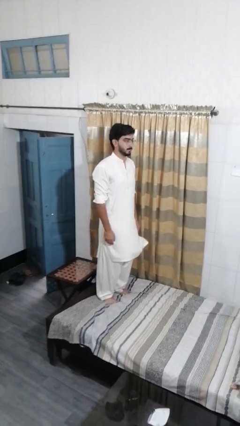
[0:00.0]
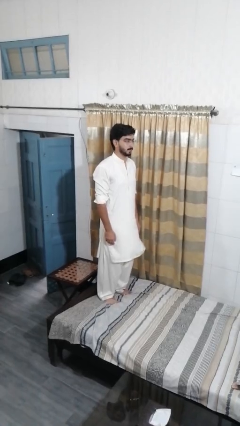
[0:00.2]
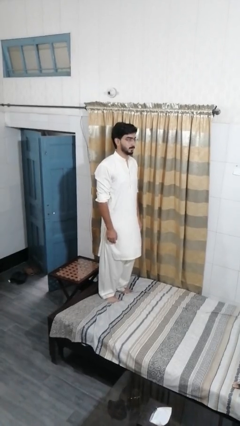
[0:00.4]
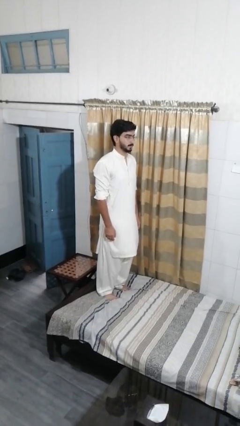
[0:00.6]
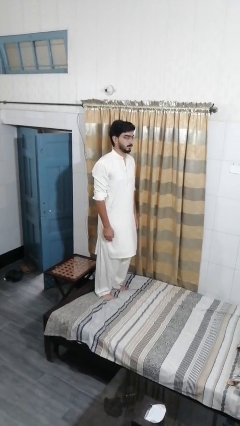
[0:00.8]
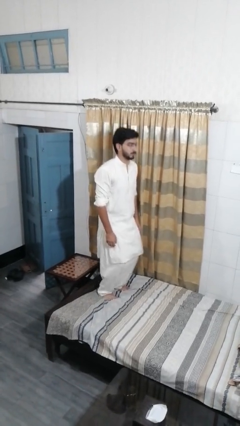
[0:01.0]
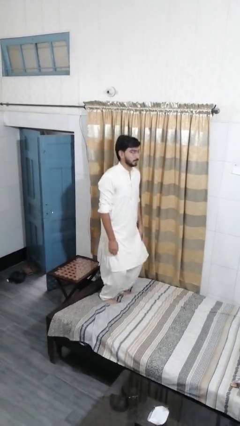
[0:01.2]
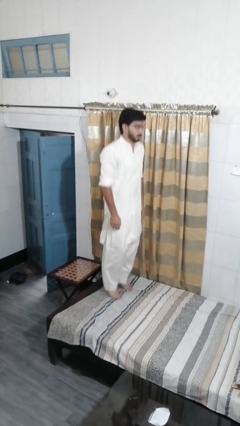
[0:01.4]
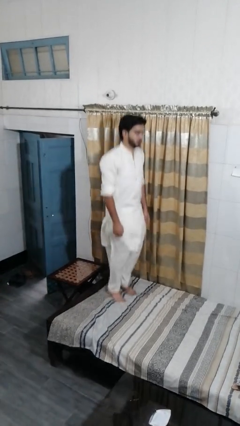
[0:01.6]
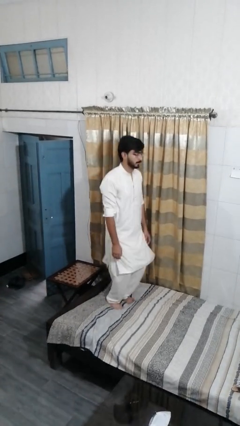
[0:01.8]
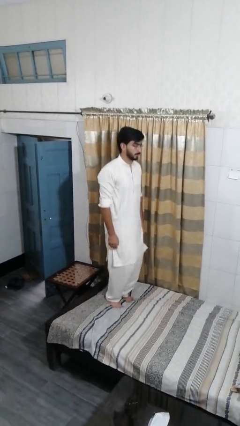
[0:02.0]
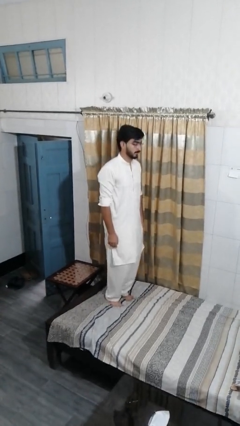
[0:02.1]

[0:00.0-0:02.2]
person jumps on bed

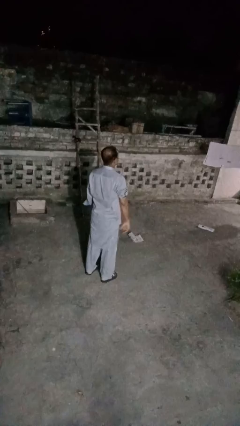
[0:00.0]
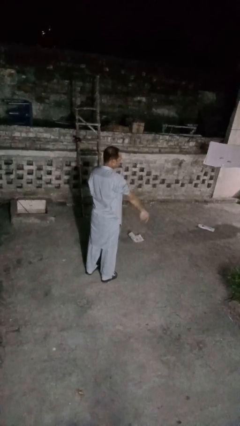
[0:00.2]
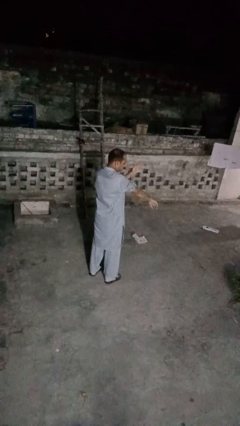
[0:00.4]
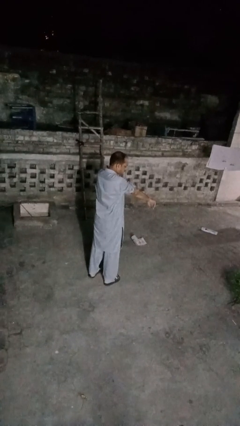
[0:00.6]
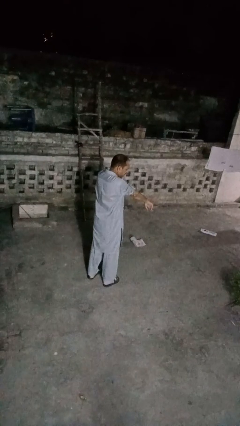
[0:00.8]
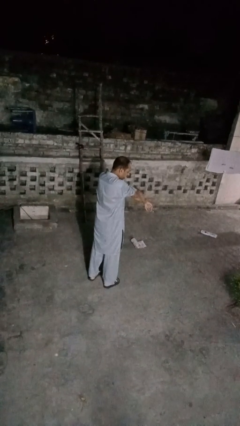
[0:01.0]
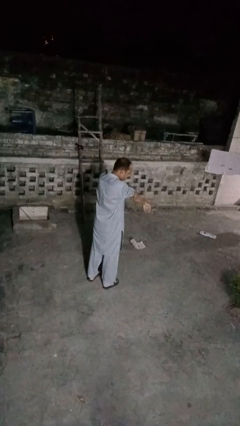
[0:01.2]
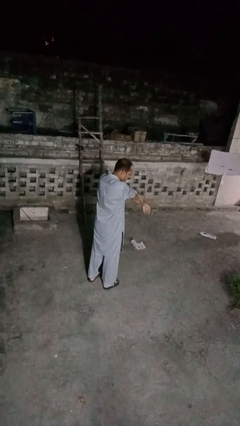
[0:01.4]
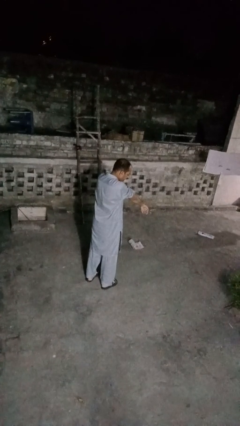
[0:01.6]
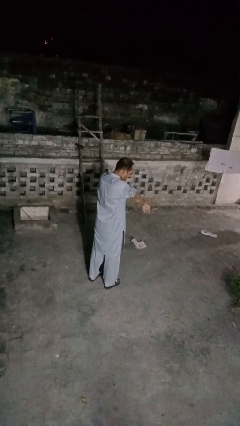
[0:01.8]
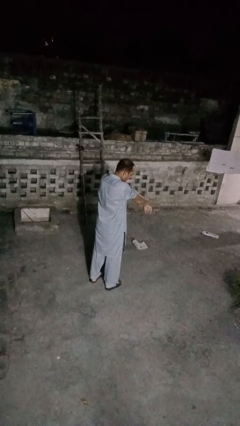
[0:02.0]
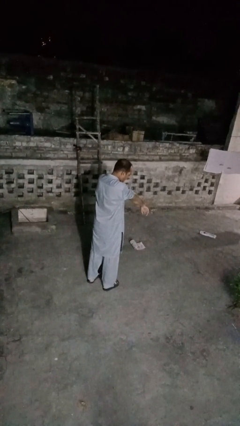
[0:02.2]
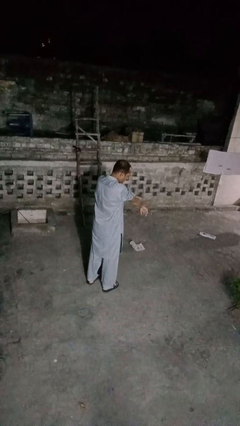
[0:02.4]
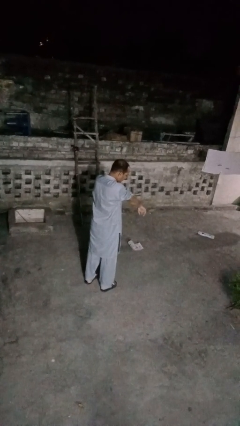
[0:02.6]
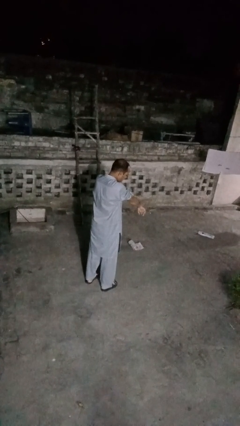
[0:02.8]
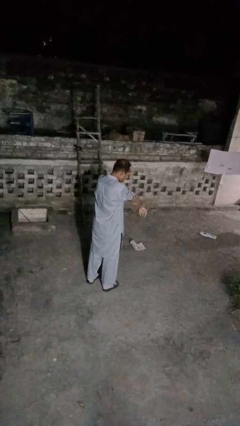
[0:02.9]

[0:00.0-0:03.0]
person swats bug

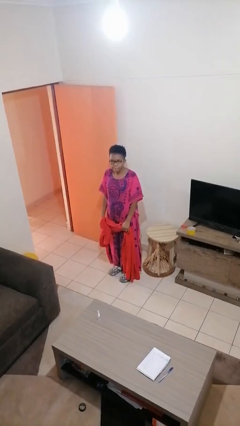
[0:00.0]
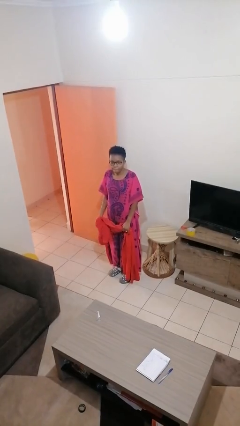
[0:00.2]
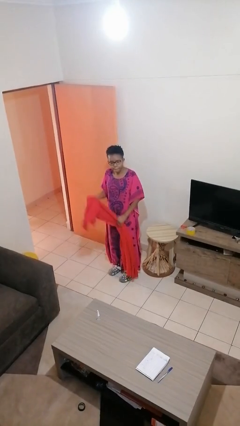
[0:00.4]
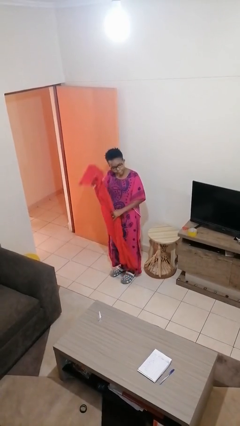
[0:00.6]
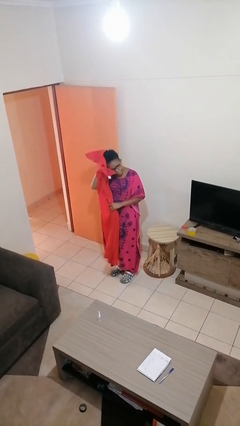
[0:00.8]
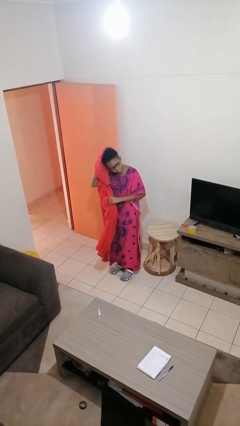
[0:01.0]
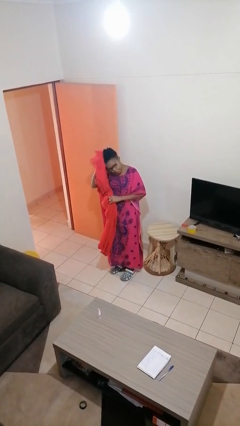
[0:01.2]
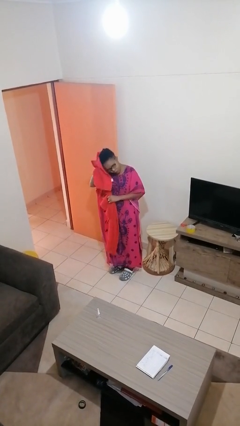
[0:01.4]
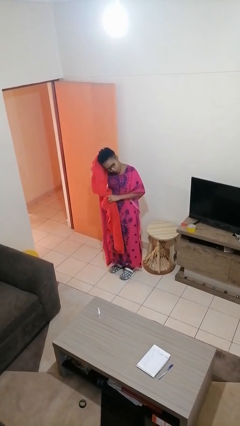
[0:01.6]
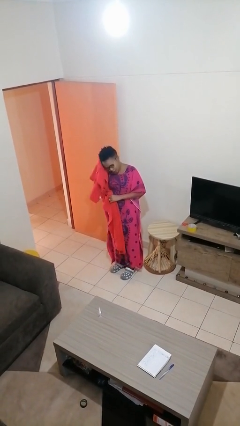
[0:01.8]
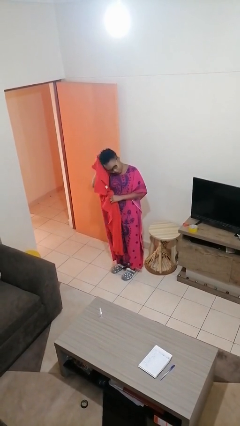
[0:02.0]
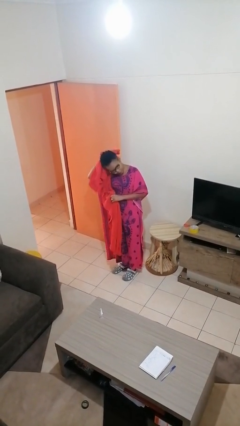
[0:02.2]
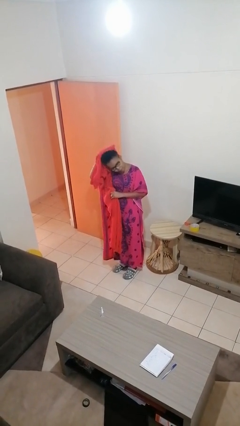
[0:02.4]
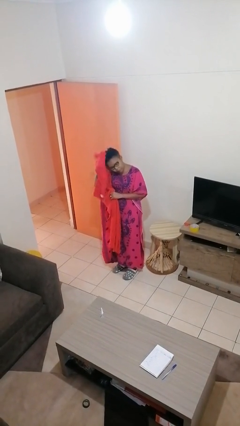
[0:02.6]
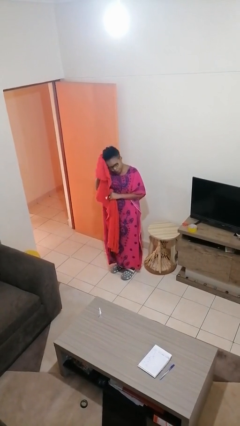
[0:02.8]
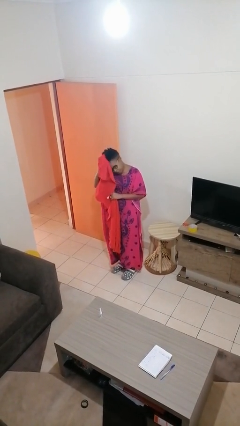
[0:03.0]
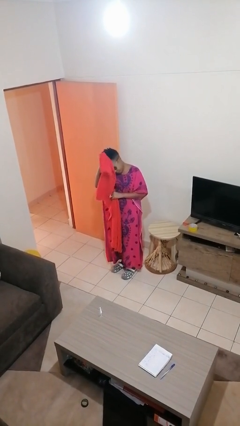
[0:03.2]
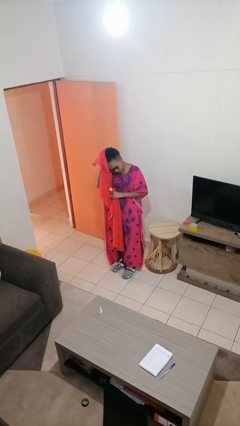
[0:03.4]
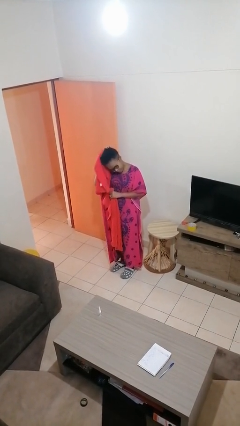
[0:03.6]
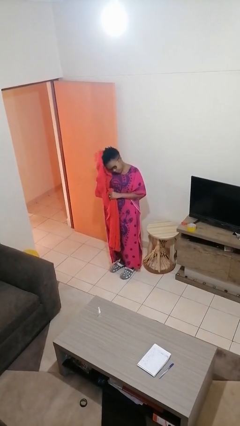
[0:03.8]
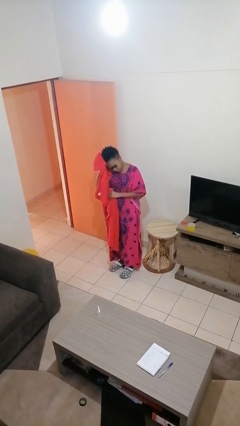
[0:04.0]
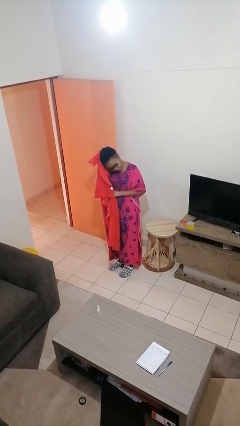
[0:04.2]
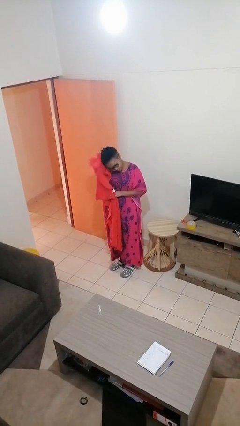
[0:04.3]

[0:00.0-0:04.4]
person dries hair with towel

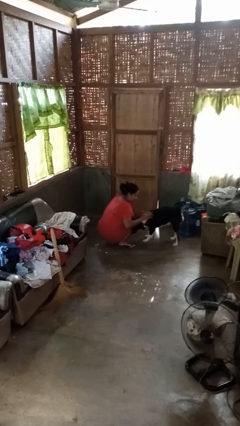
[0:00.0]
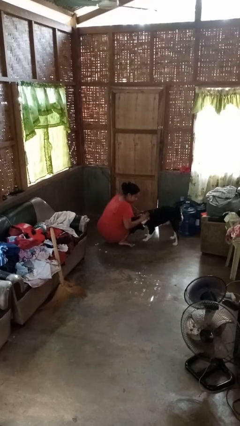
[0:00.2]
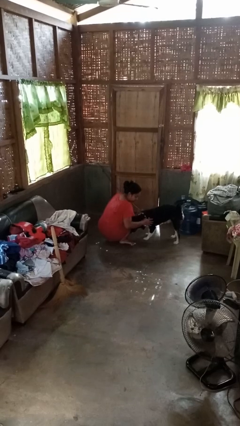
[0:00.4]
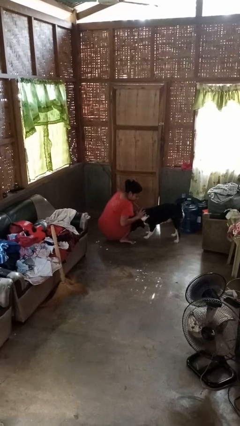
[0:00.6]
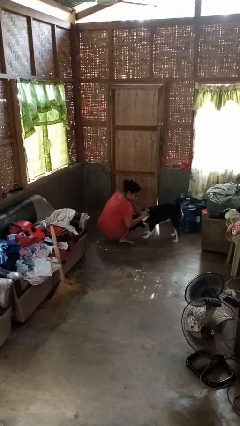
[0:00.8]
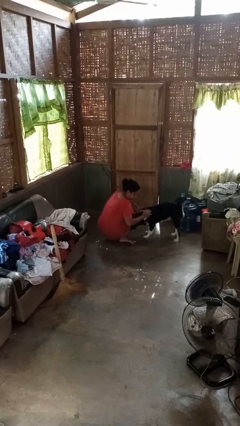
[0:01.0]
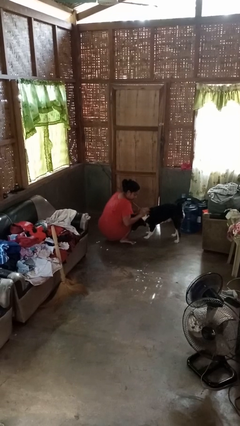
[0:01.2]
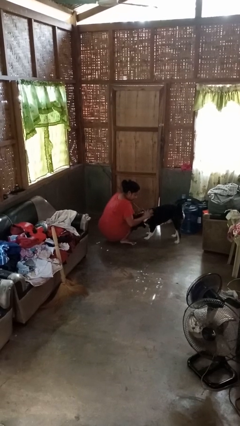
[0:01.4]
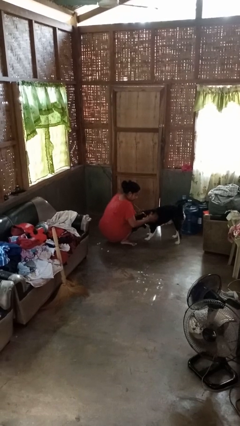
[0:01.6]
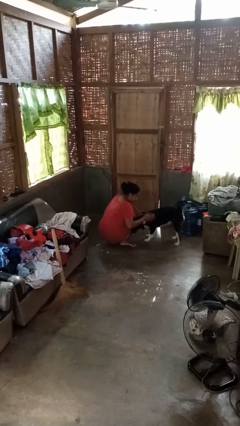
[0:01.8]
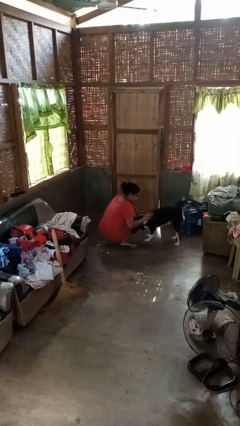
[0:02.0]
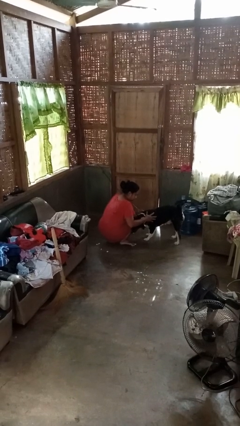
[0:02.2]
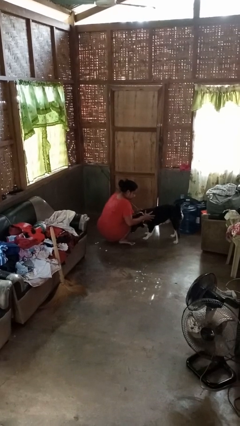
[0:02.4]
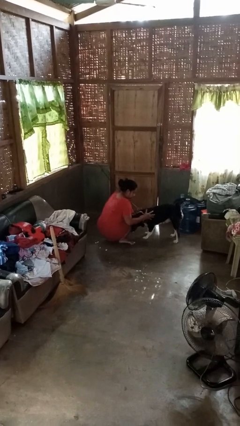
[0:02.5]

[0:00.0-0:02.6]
person pets dog

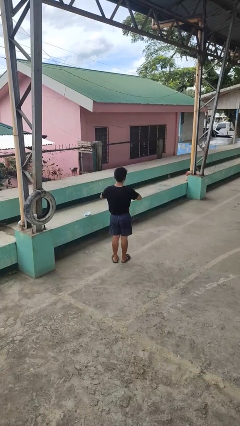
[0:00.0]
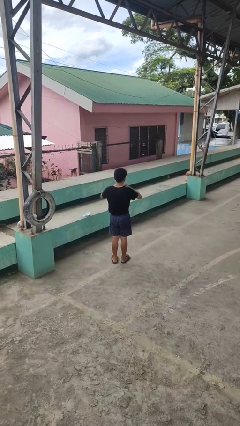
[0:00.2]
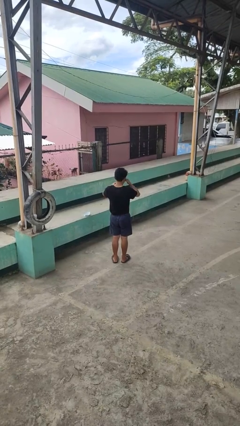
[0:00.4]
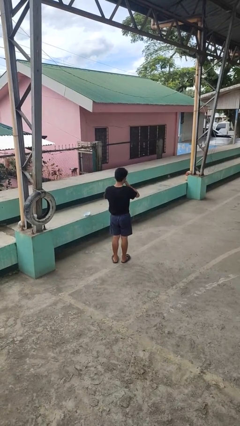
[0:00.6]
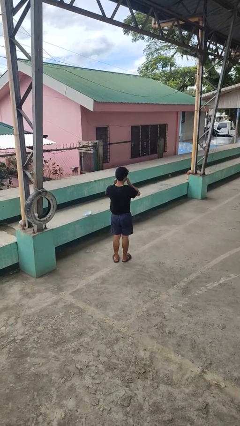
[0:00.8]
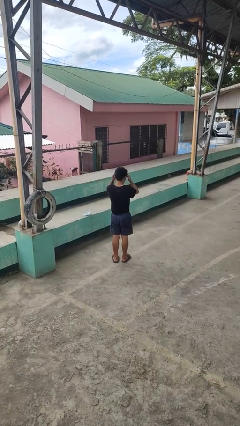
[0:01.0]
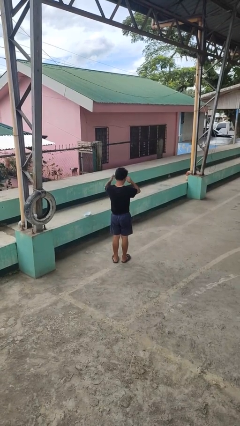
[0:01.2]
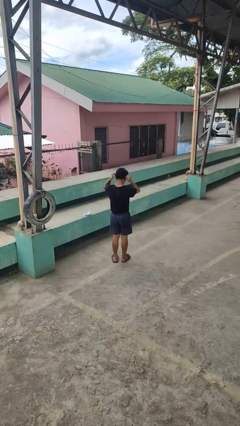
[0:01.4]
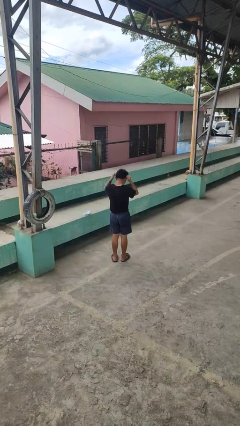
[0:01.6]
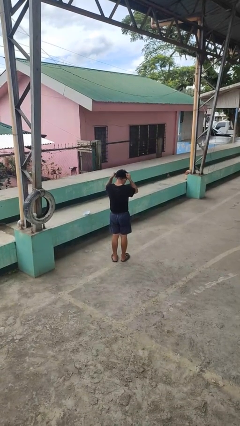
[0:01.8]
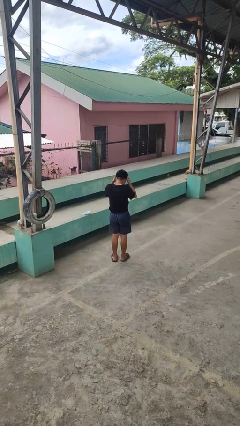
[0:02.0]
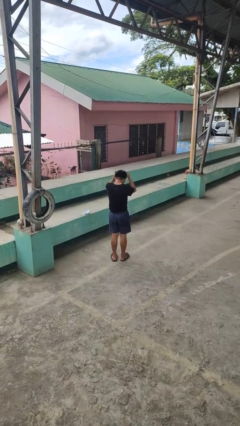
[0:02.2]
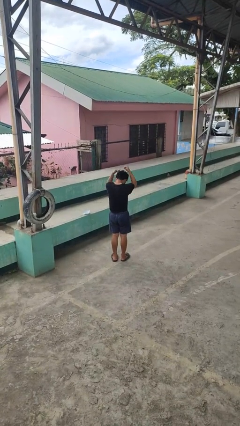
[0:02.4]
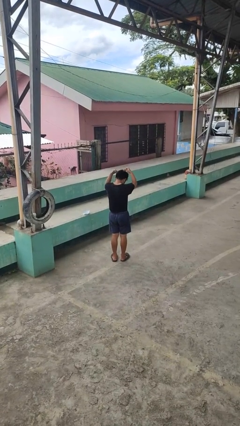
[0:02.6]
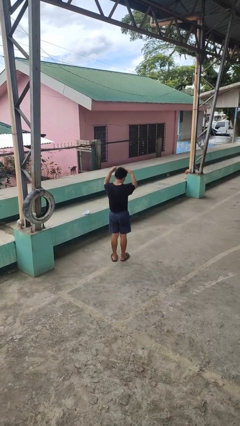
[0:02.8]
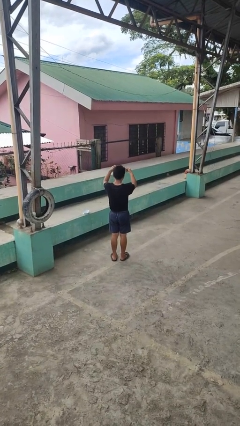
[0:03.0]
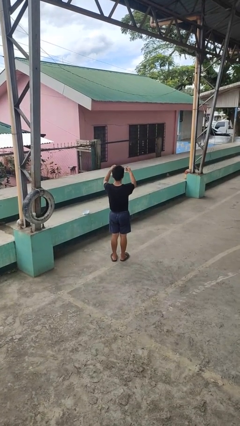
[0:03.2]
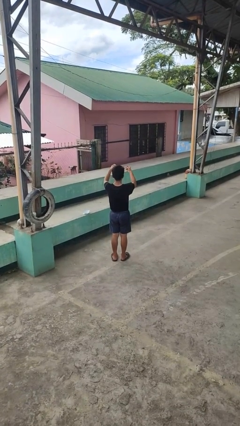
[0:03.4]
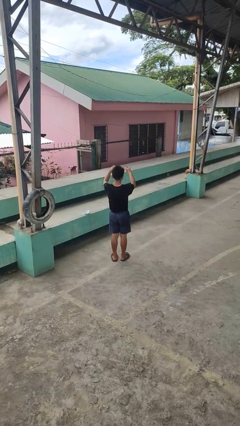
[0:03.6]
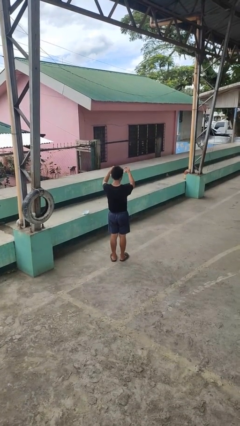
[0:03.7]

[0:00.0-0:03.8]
person takes off necklace

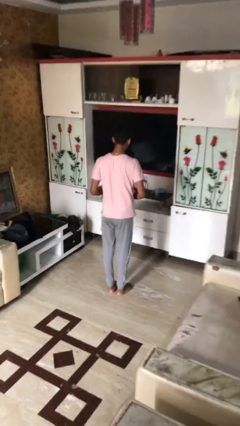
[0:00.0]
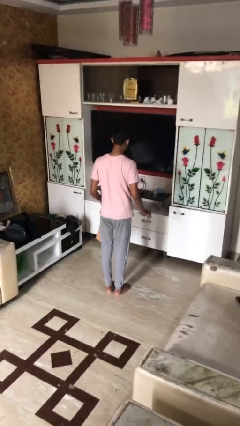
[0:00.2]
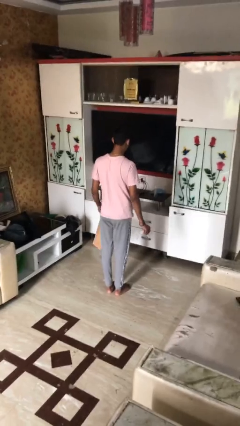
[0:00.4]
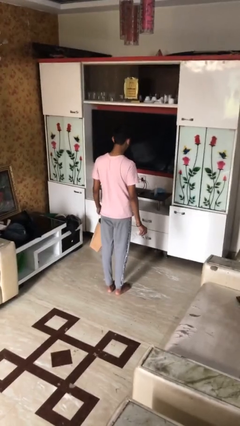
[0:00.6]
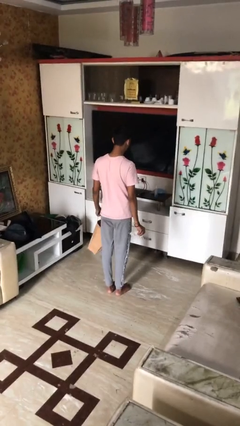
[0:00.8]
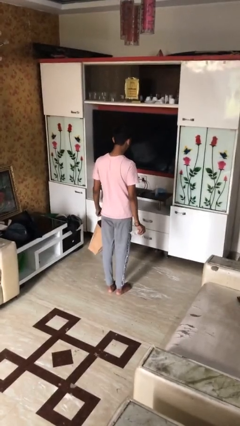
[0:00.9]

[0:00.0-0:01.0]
person takes object from bag
